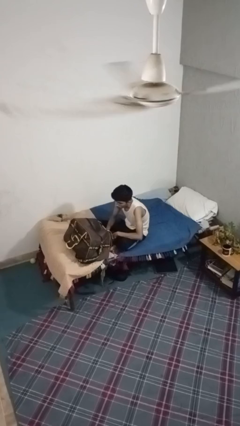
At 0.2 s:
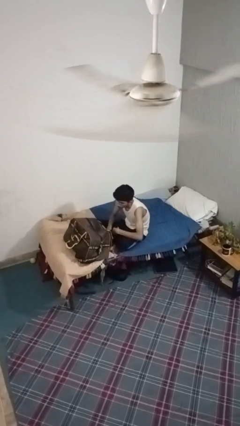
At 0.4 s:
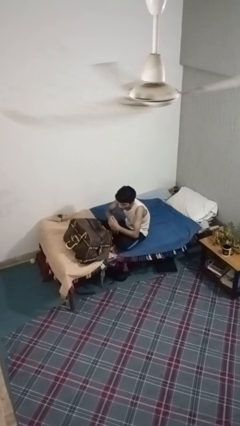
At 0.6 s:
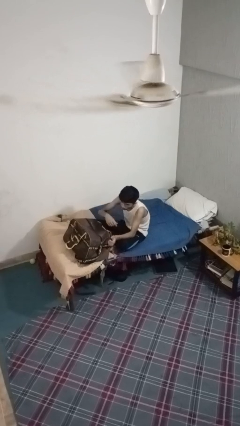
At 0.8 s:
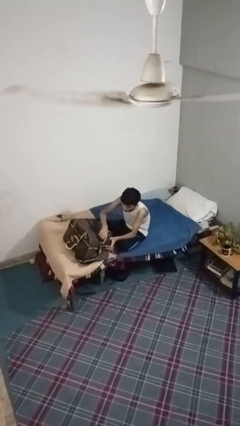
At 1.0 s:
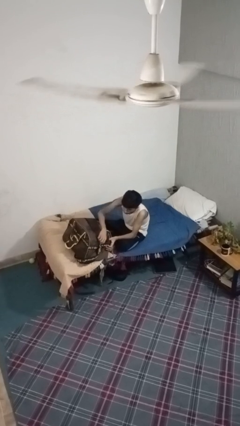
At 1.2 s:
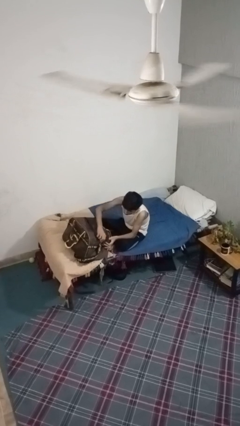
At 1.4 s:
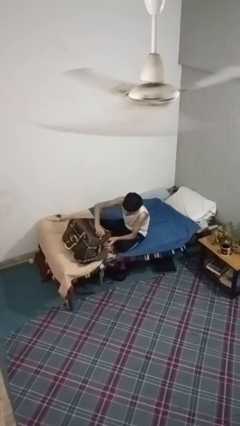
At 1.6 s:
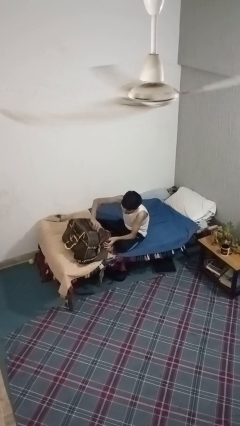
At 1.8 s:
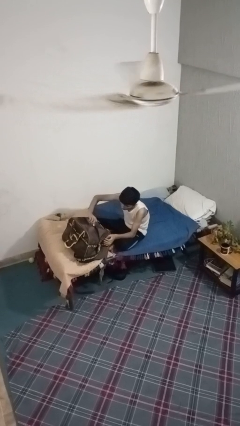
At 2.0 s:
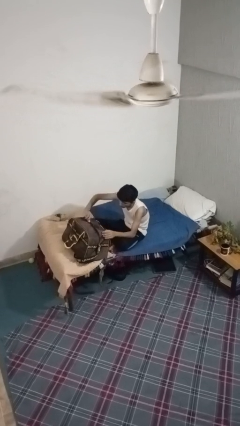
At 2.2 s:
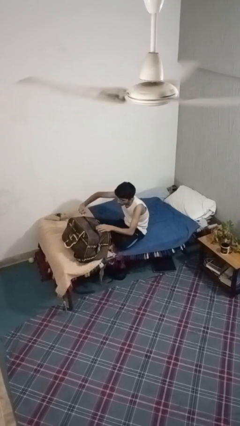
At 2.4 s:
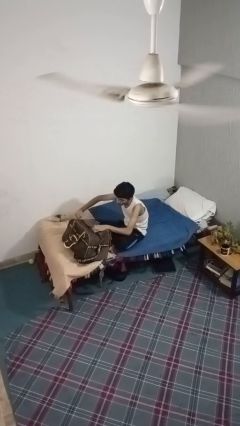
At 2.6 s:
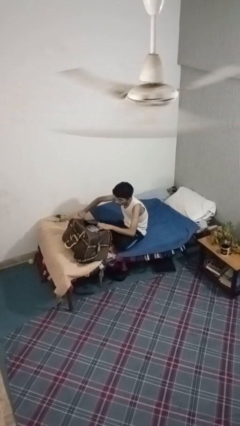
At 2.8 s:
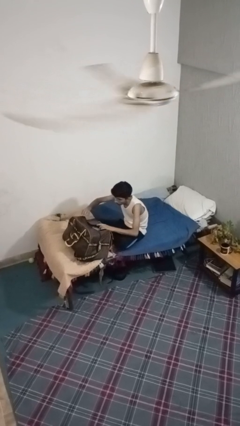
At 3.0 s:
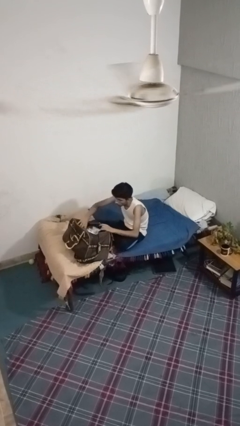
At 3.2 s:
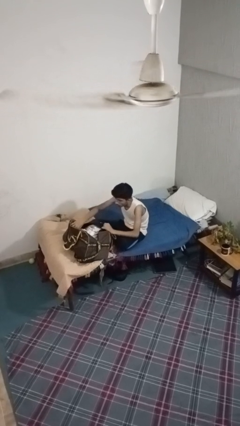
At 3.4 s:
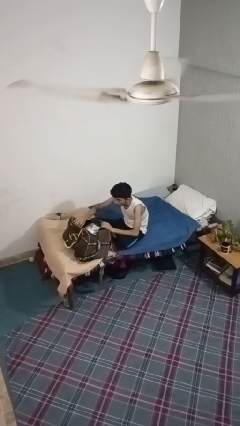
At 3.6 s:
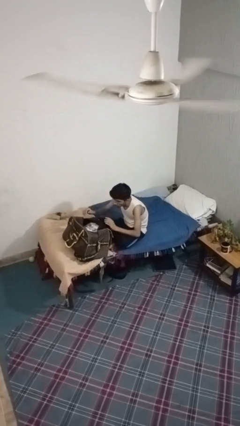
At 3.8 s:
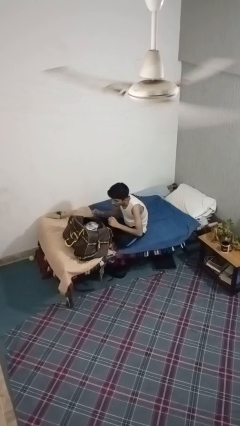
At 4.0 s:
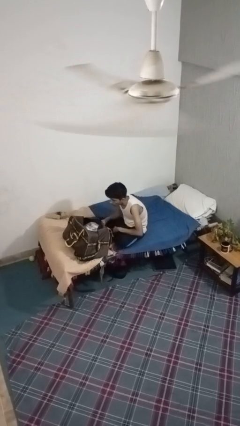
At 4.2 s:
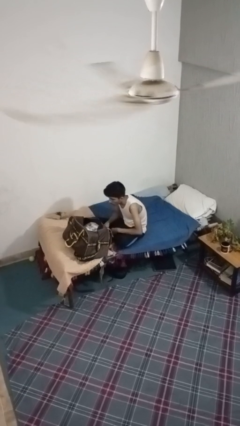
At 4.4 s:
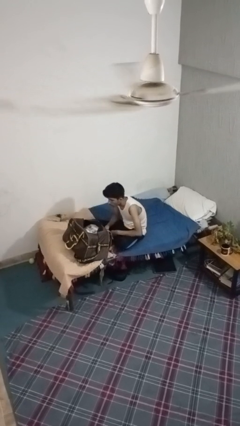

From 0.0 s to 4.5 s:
person opens suitcase

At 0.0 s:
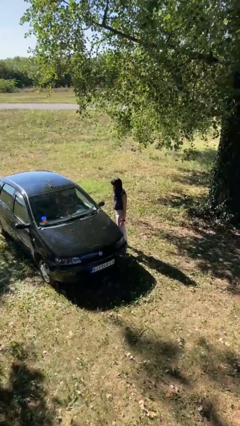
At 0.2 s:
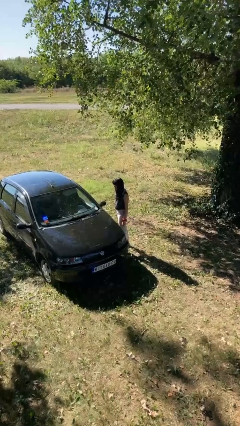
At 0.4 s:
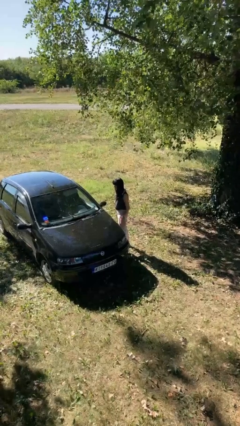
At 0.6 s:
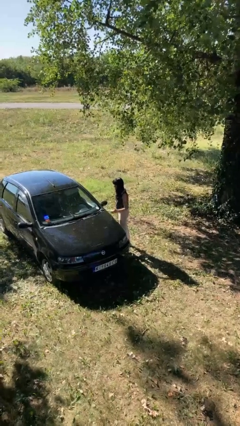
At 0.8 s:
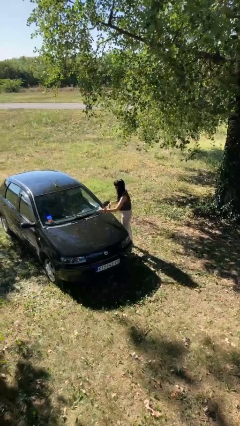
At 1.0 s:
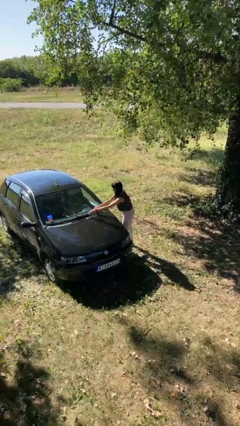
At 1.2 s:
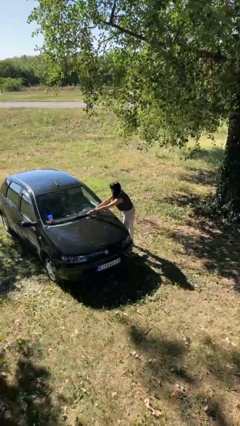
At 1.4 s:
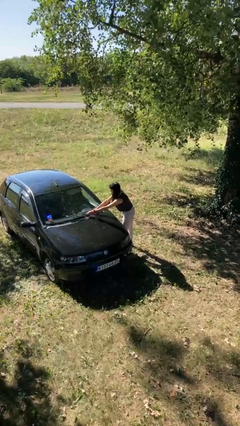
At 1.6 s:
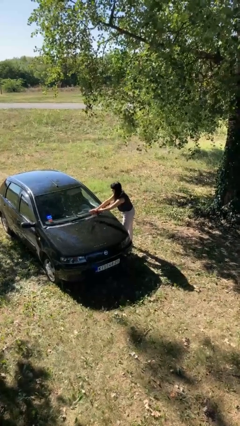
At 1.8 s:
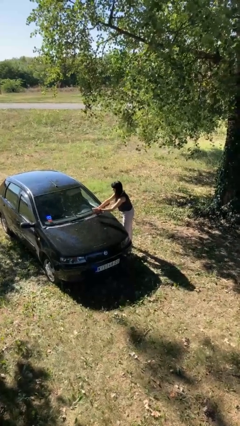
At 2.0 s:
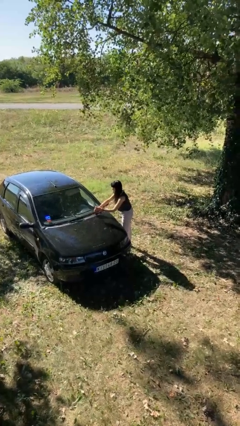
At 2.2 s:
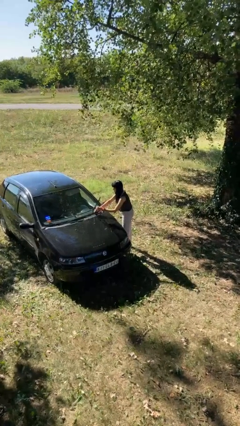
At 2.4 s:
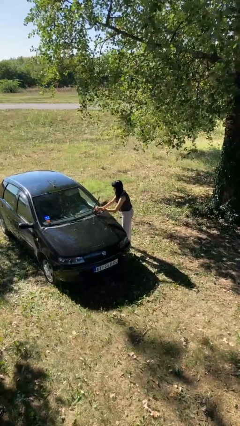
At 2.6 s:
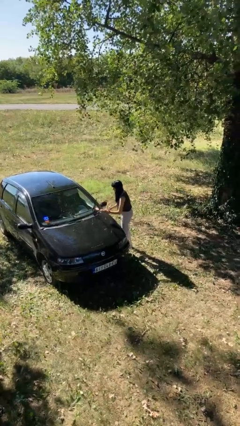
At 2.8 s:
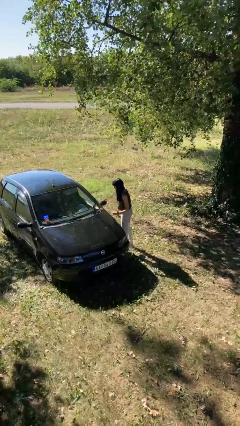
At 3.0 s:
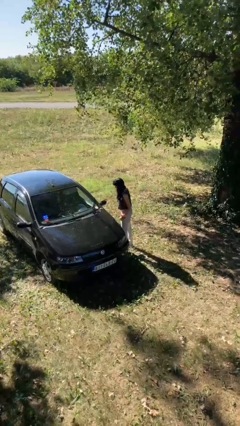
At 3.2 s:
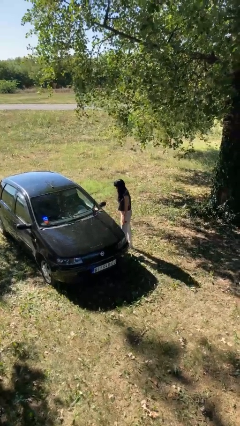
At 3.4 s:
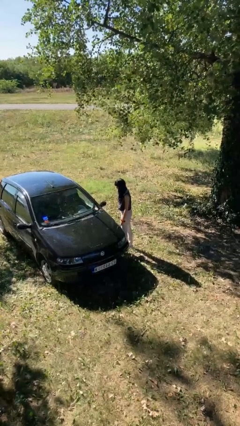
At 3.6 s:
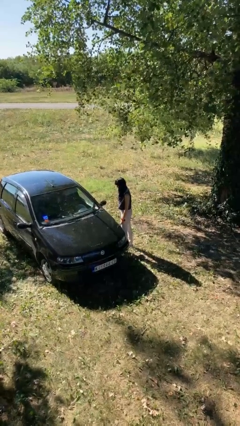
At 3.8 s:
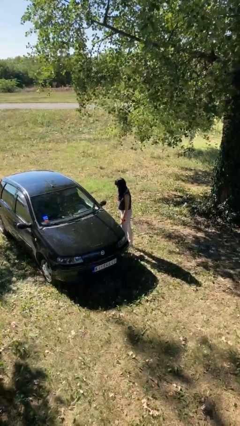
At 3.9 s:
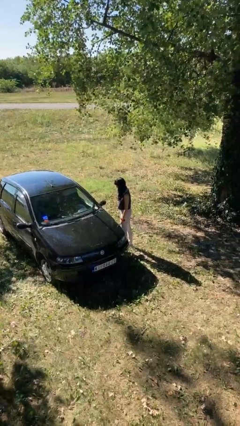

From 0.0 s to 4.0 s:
person flips up car wipers

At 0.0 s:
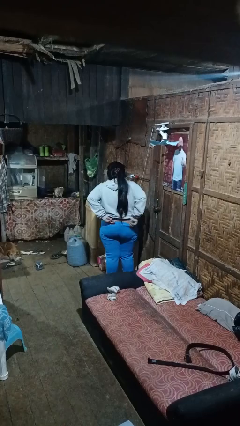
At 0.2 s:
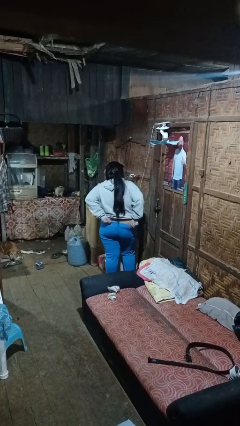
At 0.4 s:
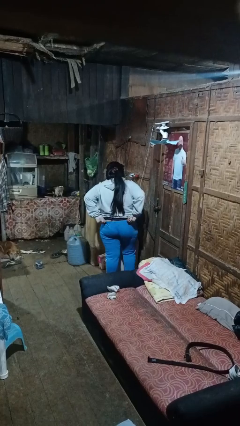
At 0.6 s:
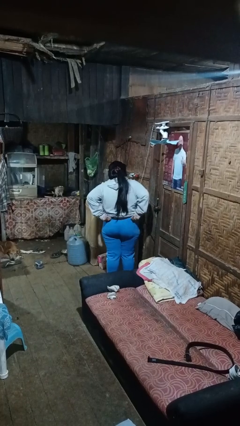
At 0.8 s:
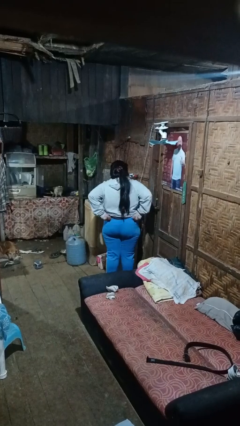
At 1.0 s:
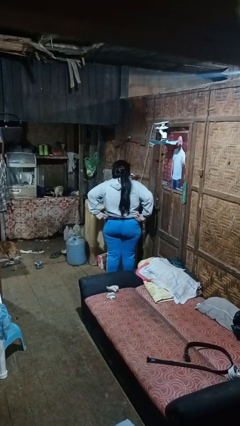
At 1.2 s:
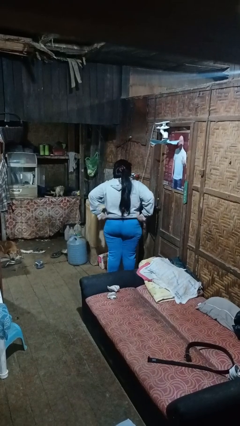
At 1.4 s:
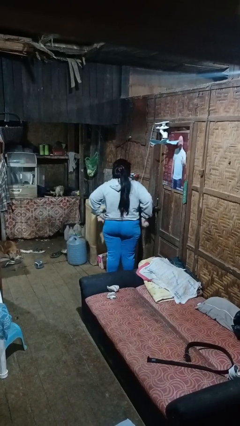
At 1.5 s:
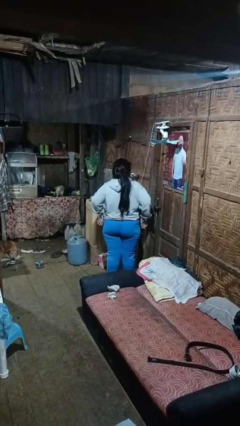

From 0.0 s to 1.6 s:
person hikes up pants

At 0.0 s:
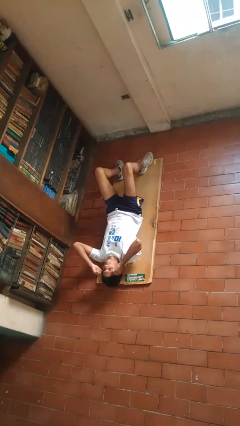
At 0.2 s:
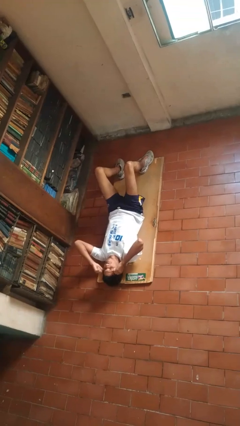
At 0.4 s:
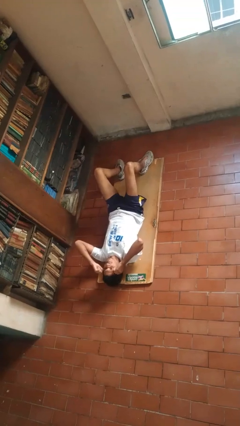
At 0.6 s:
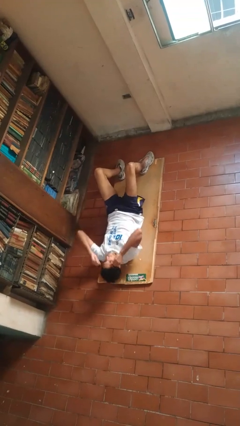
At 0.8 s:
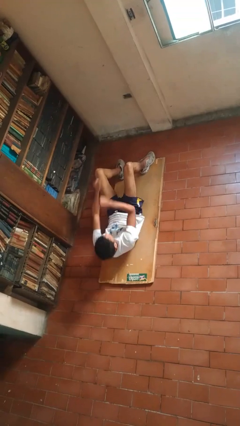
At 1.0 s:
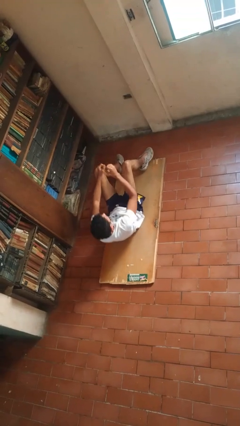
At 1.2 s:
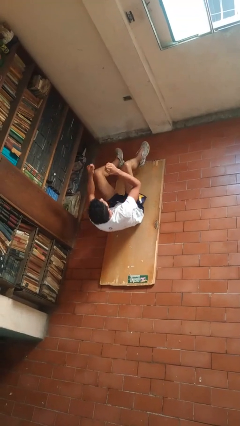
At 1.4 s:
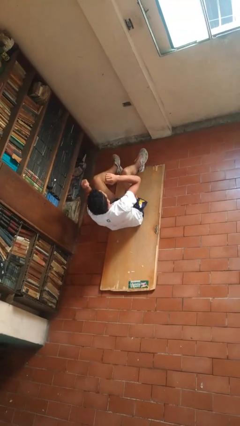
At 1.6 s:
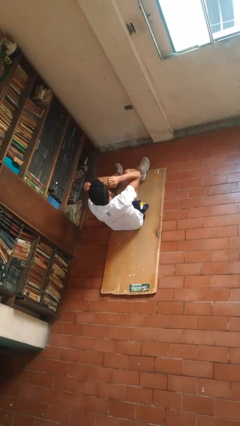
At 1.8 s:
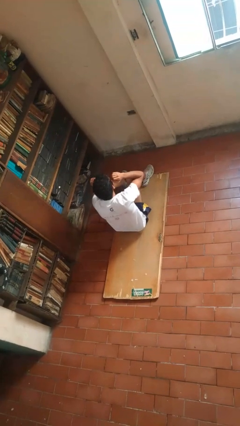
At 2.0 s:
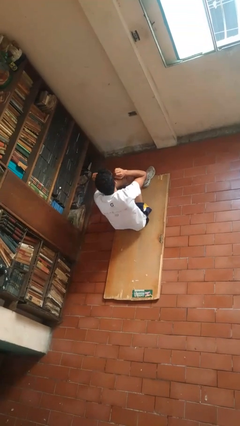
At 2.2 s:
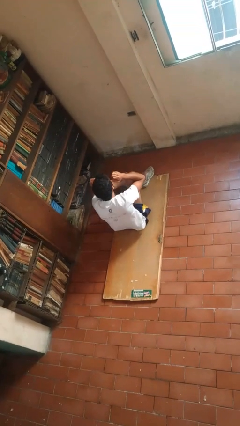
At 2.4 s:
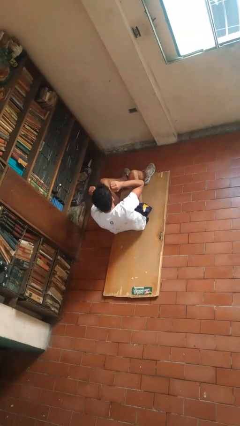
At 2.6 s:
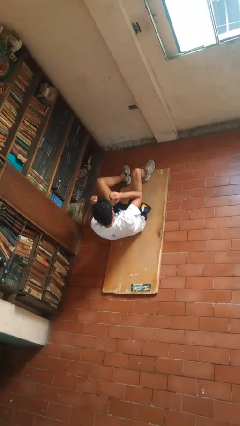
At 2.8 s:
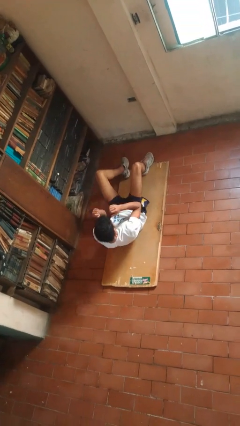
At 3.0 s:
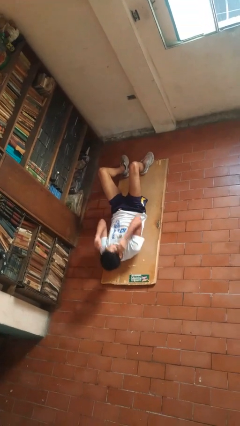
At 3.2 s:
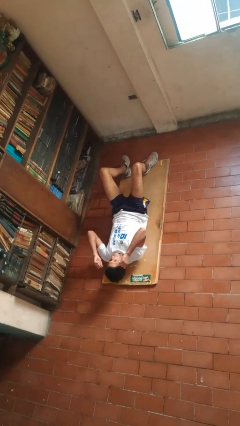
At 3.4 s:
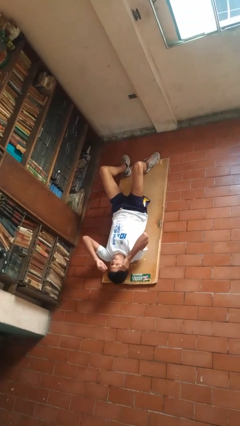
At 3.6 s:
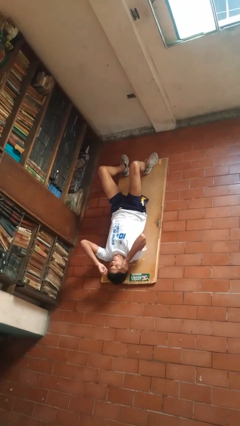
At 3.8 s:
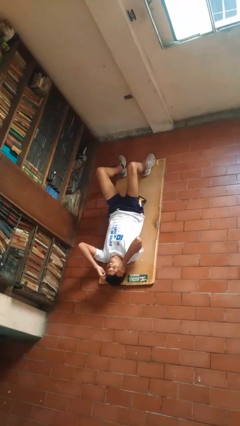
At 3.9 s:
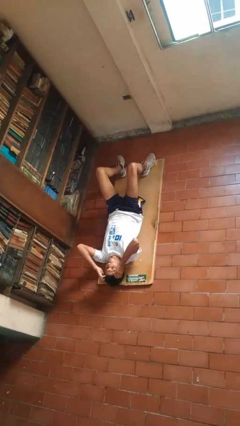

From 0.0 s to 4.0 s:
person exercises with situp

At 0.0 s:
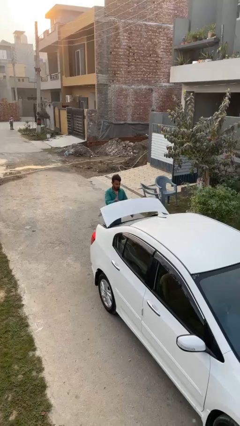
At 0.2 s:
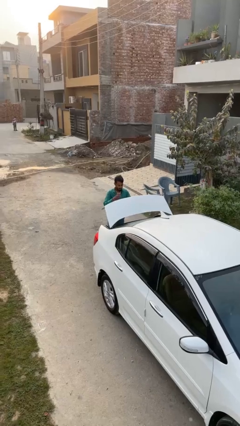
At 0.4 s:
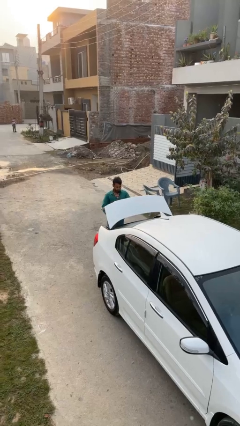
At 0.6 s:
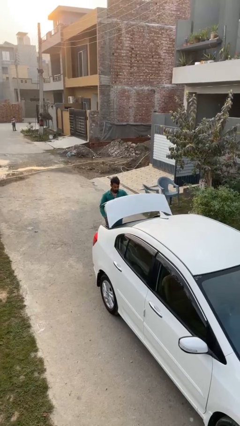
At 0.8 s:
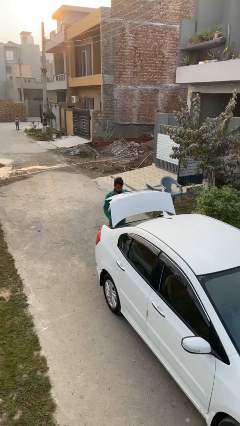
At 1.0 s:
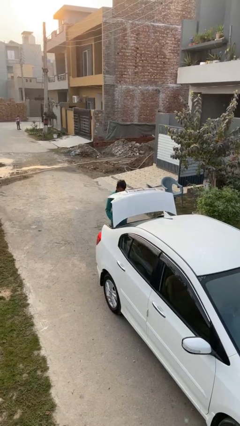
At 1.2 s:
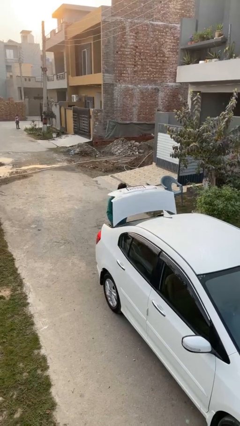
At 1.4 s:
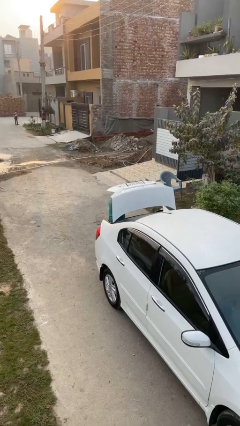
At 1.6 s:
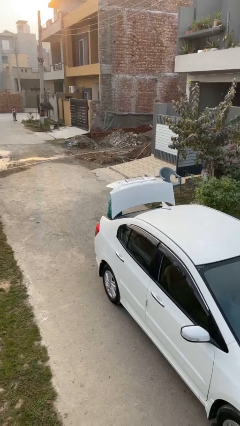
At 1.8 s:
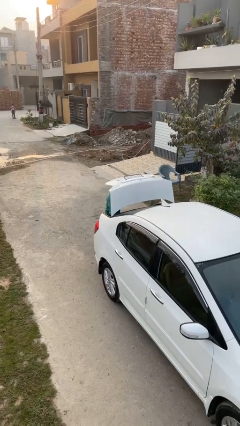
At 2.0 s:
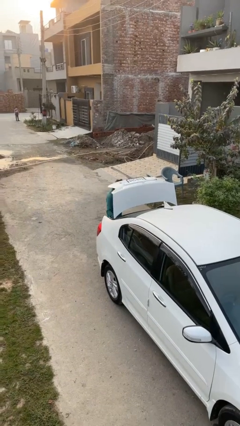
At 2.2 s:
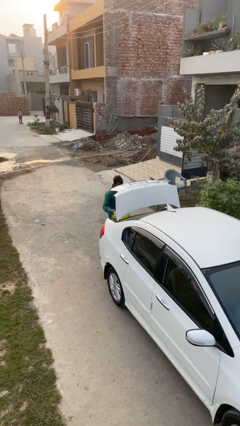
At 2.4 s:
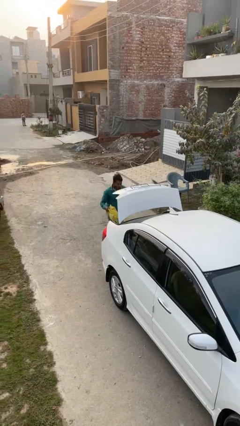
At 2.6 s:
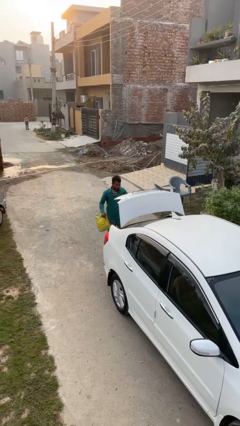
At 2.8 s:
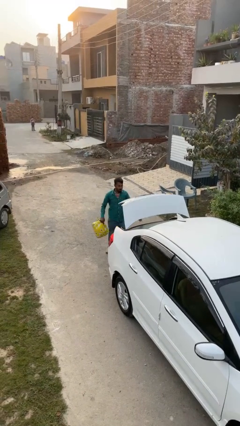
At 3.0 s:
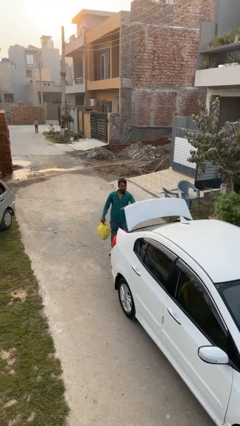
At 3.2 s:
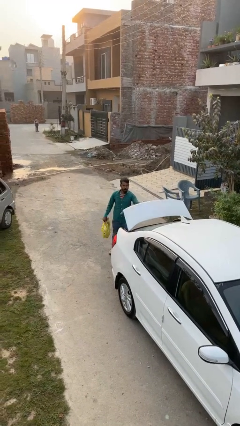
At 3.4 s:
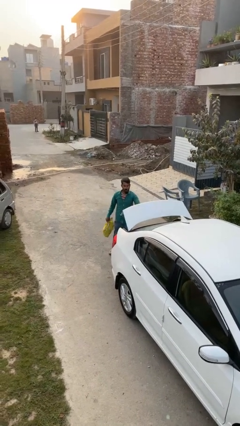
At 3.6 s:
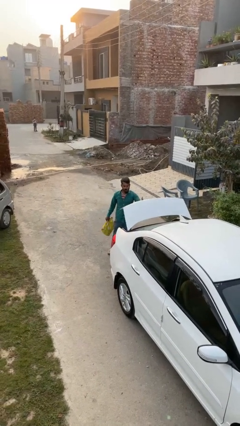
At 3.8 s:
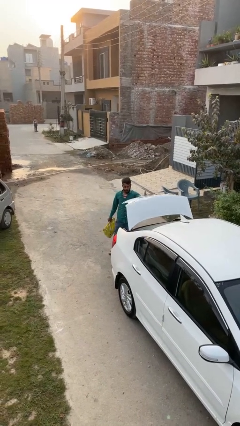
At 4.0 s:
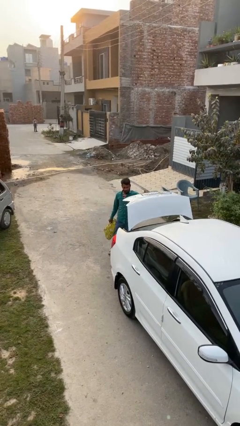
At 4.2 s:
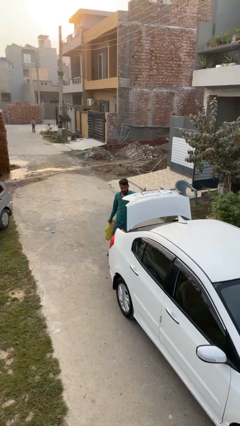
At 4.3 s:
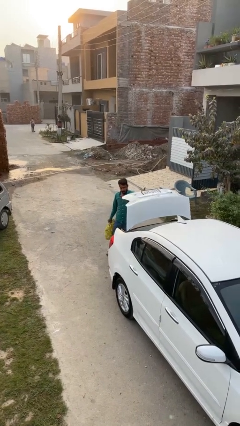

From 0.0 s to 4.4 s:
person unloads car
